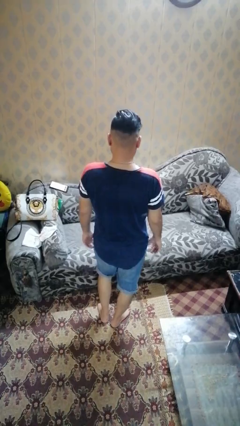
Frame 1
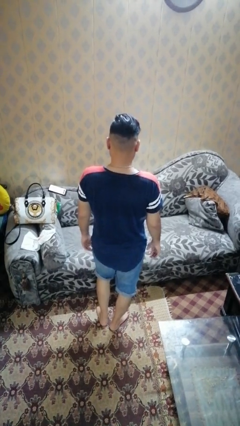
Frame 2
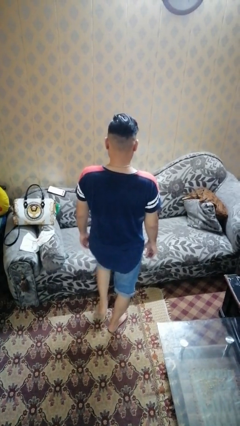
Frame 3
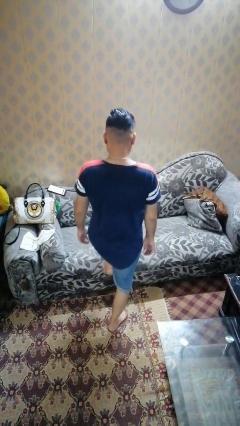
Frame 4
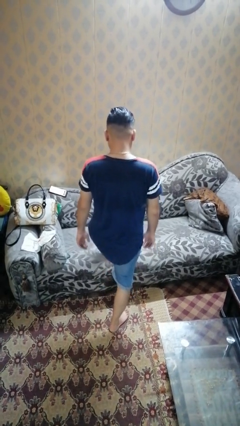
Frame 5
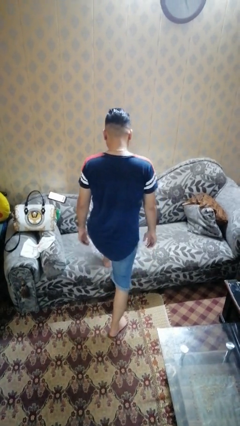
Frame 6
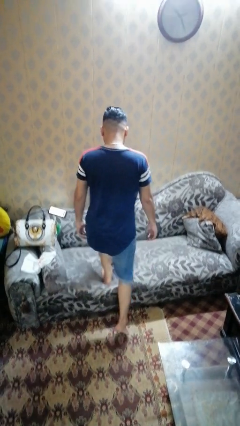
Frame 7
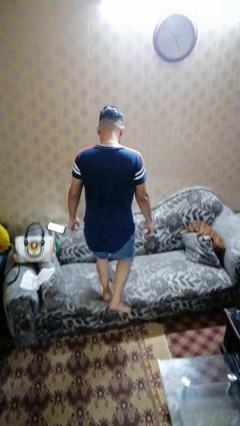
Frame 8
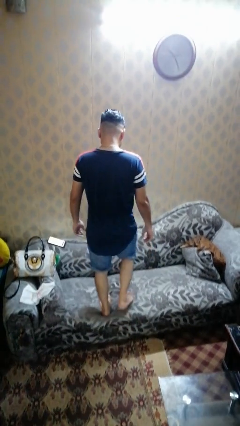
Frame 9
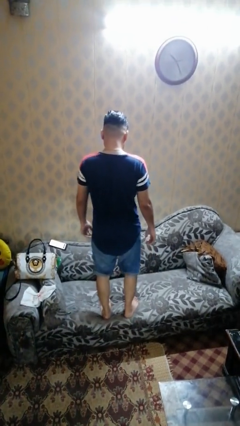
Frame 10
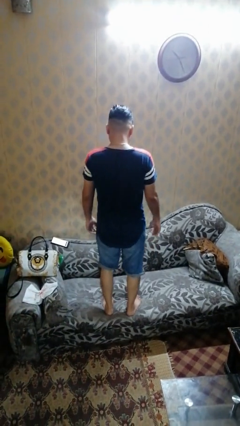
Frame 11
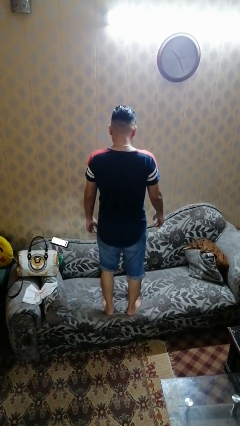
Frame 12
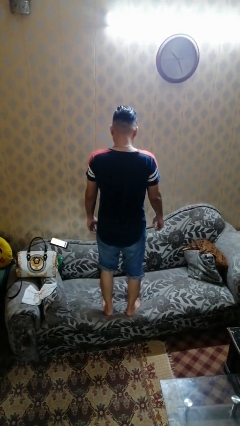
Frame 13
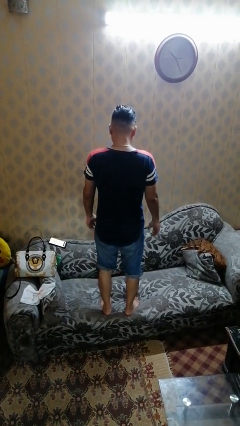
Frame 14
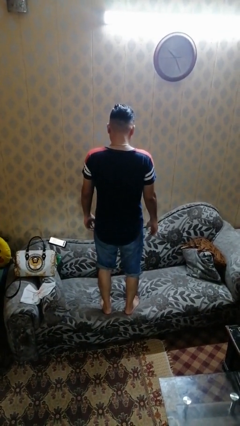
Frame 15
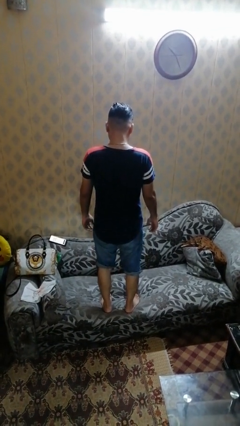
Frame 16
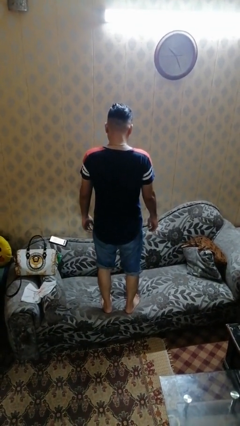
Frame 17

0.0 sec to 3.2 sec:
person climbs on couch

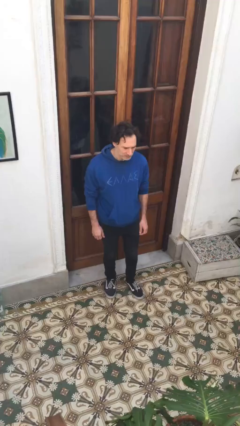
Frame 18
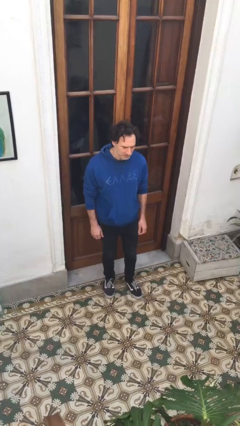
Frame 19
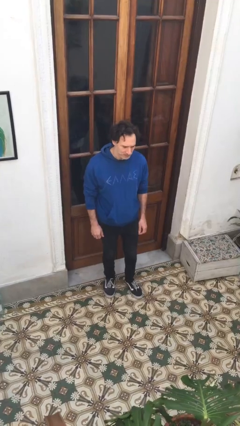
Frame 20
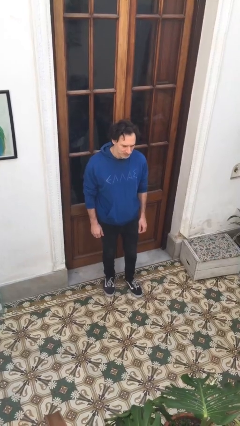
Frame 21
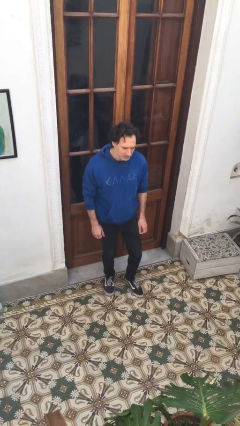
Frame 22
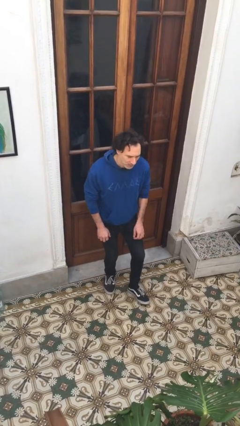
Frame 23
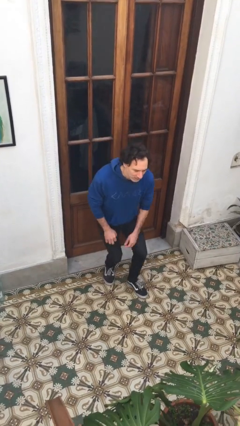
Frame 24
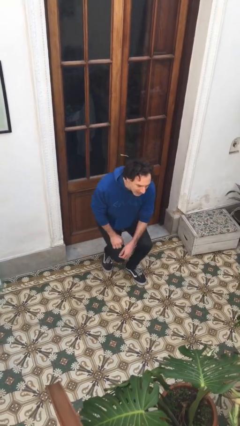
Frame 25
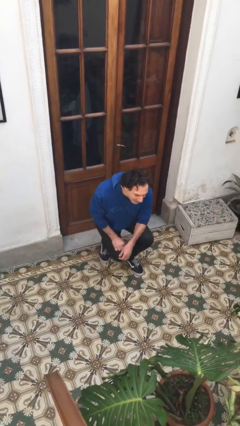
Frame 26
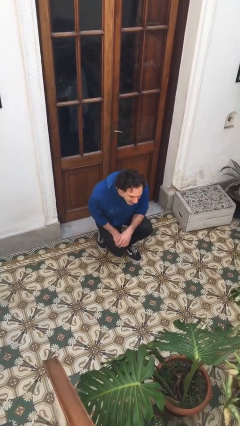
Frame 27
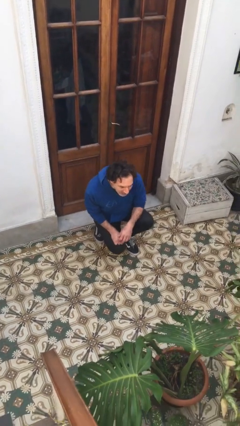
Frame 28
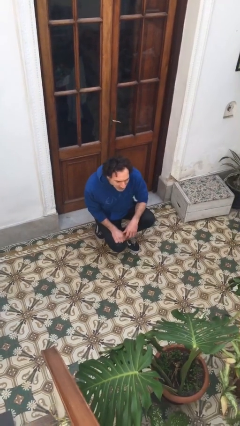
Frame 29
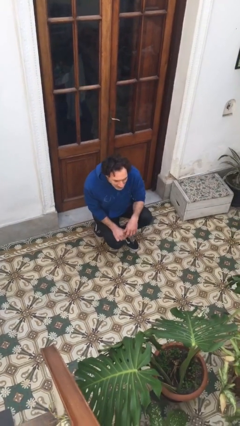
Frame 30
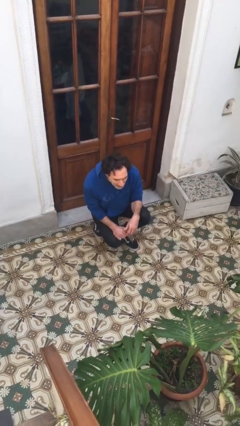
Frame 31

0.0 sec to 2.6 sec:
person squats
